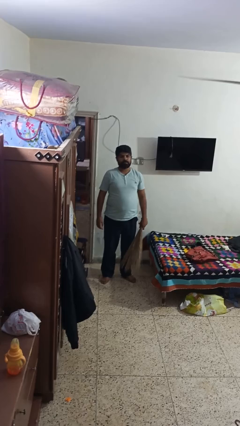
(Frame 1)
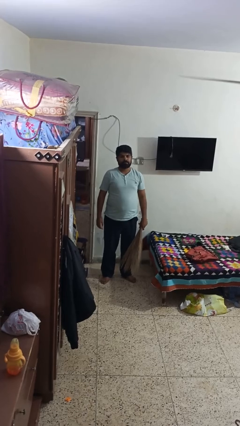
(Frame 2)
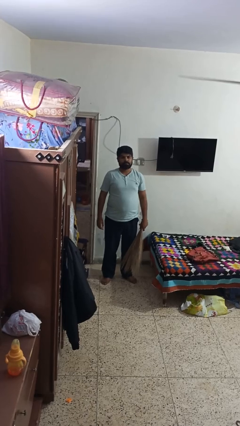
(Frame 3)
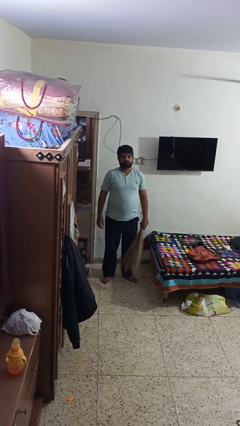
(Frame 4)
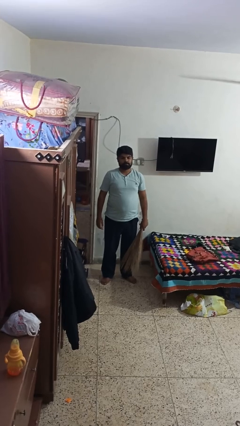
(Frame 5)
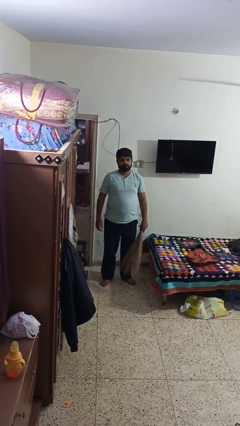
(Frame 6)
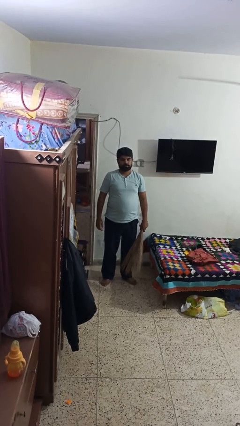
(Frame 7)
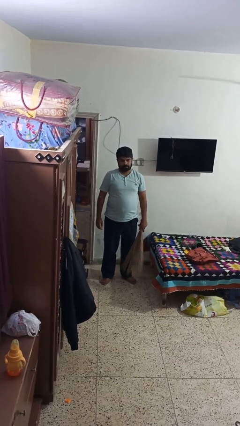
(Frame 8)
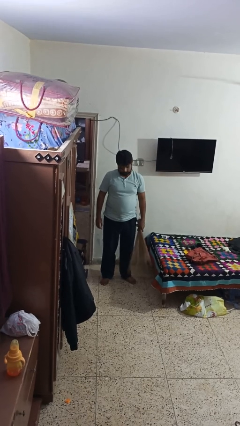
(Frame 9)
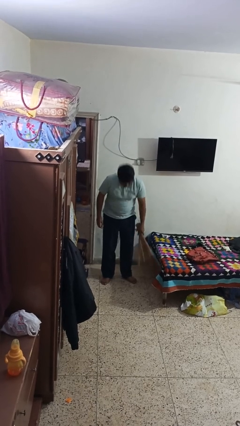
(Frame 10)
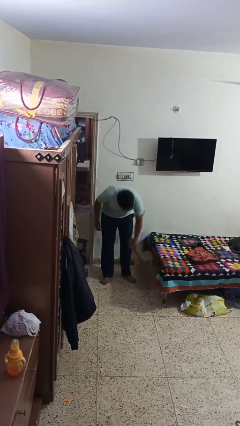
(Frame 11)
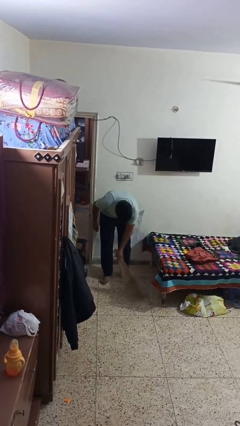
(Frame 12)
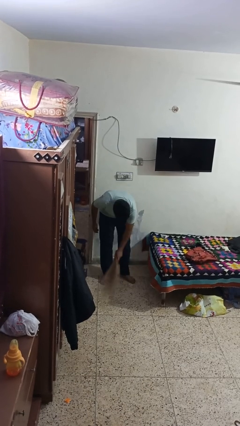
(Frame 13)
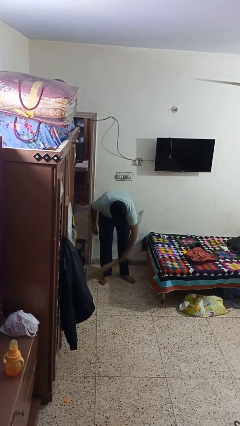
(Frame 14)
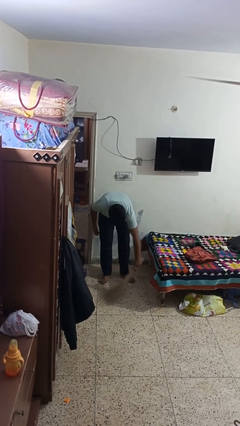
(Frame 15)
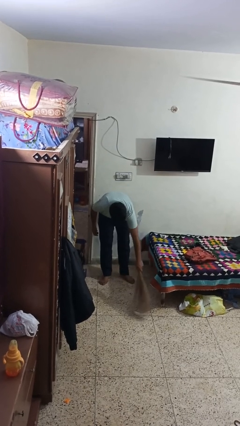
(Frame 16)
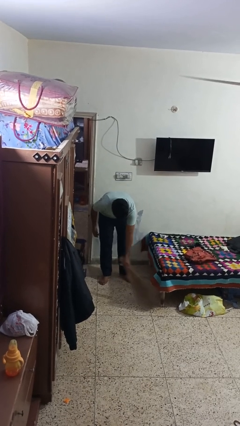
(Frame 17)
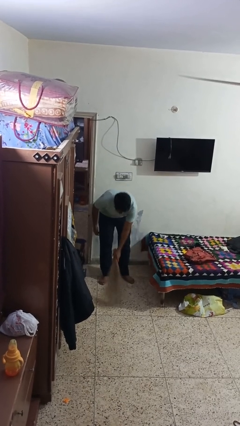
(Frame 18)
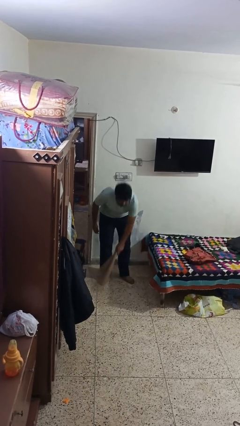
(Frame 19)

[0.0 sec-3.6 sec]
person sweeps floor

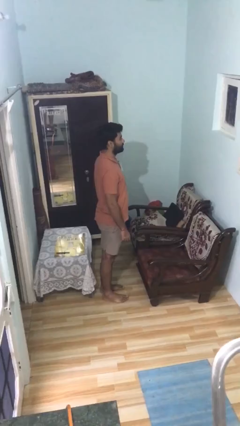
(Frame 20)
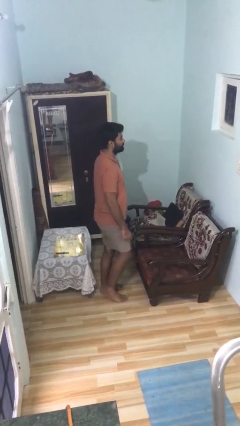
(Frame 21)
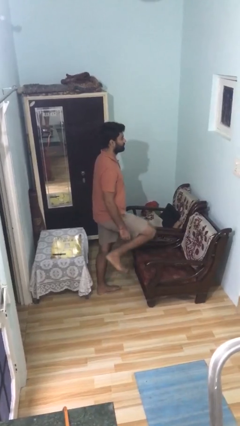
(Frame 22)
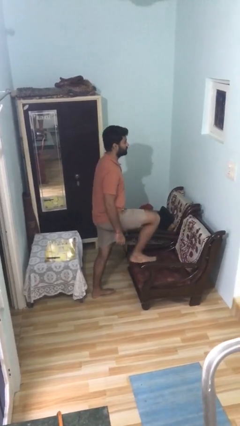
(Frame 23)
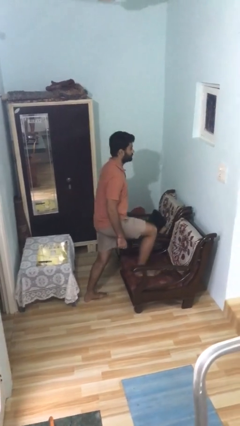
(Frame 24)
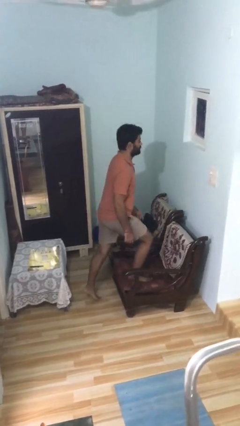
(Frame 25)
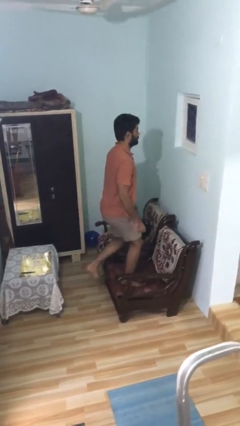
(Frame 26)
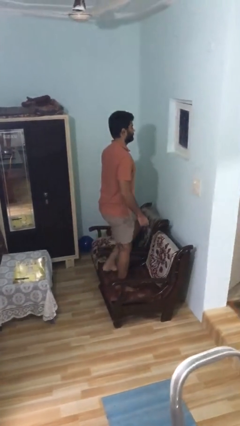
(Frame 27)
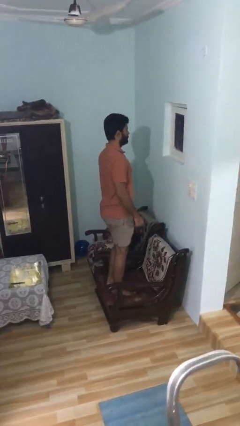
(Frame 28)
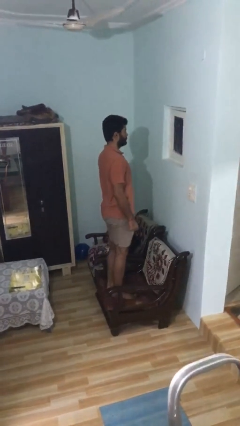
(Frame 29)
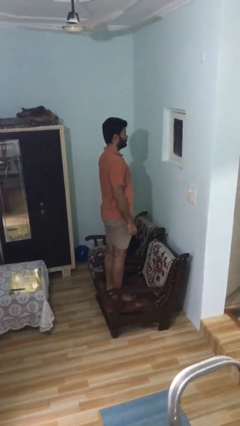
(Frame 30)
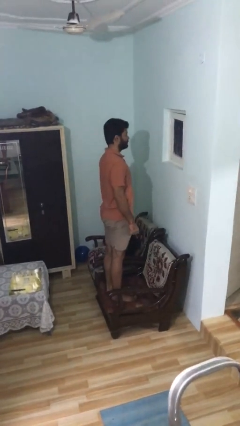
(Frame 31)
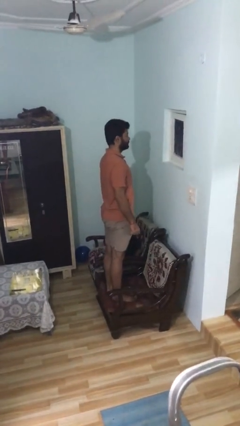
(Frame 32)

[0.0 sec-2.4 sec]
person climbs on couch

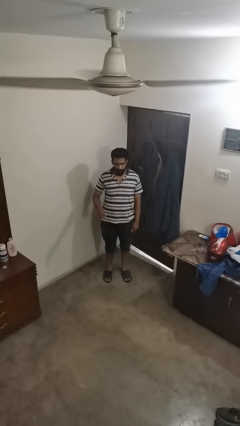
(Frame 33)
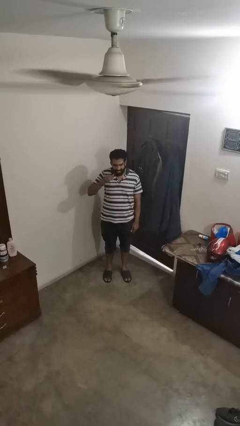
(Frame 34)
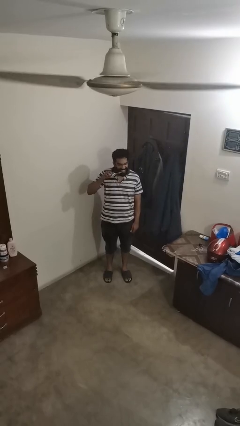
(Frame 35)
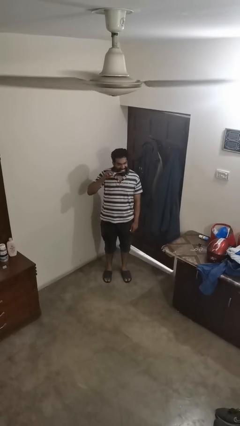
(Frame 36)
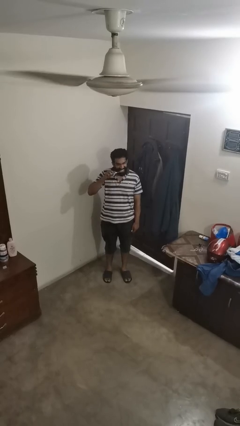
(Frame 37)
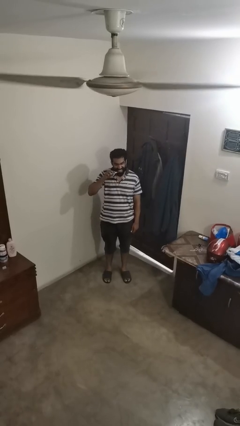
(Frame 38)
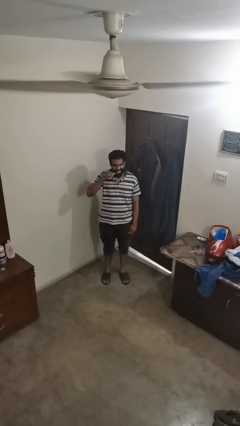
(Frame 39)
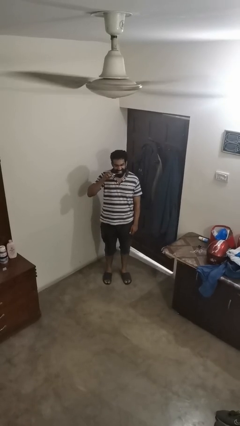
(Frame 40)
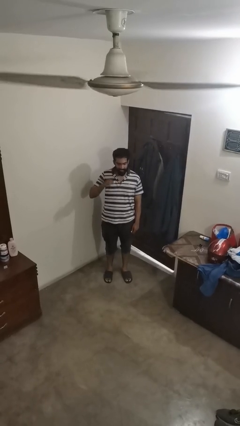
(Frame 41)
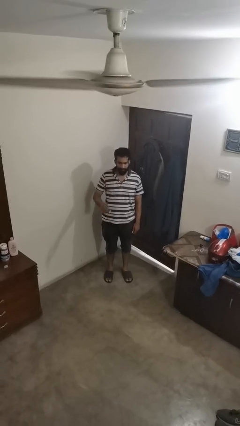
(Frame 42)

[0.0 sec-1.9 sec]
person brushes teeth

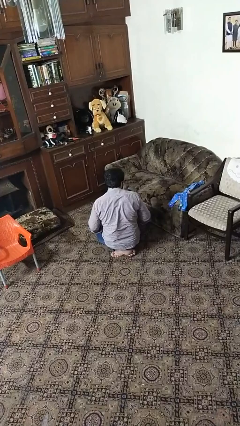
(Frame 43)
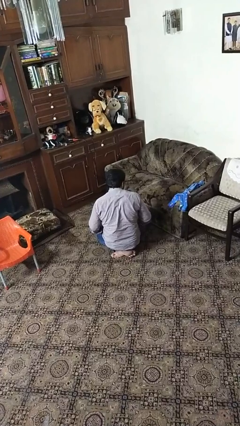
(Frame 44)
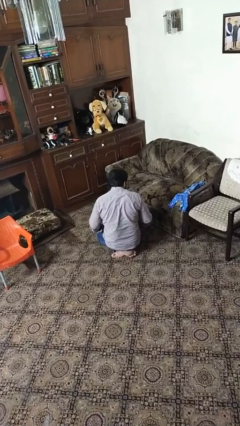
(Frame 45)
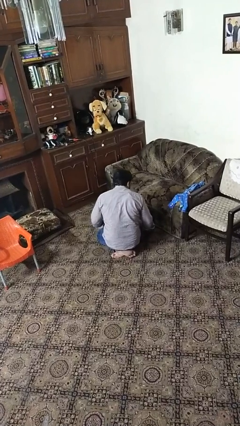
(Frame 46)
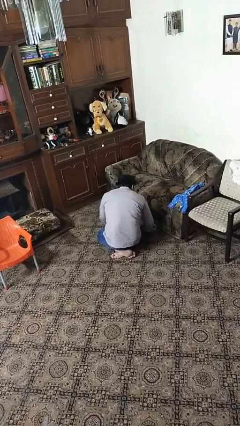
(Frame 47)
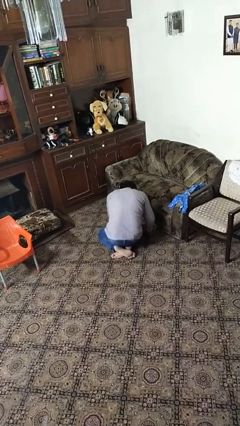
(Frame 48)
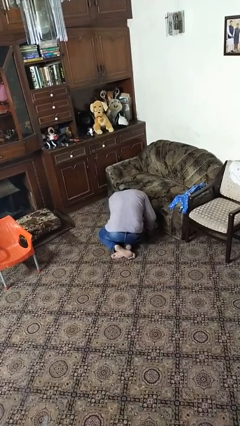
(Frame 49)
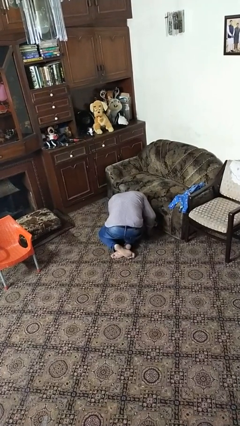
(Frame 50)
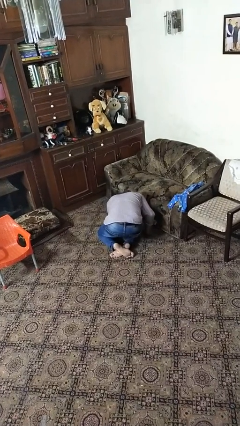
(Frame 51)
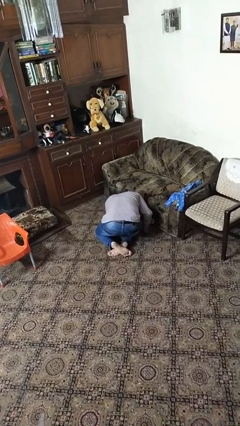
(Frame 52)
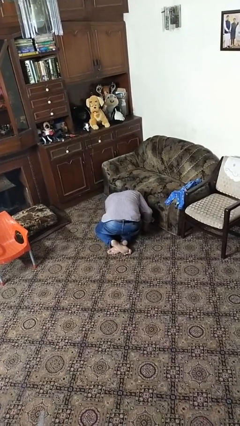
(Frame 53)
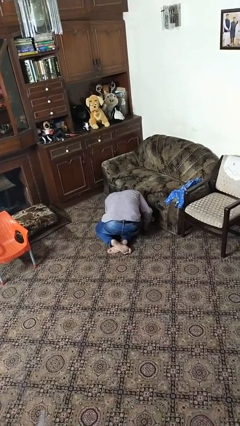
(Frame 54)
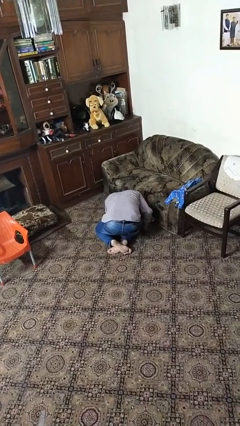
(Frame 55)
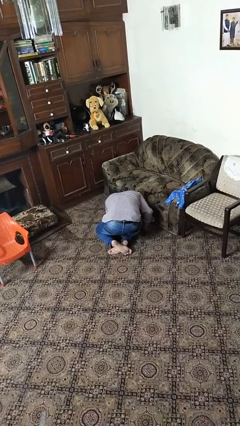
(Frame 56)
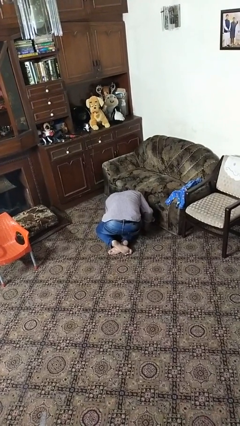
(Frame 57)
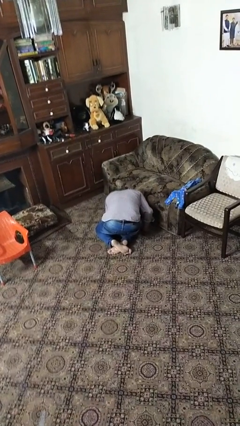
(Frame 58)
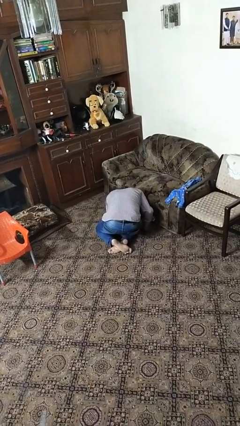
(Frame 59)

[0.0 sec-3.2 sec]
person searches under couch

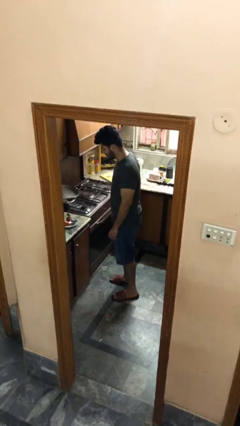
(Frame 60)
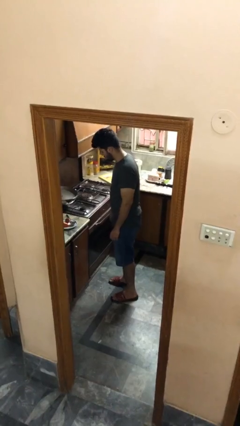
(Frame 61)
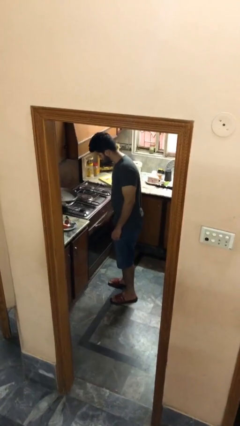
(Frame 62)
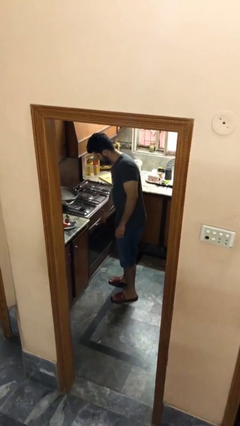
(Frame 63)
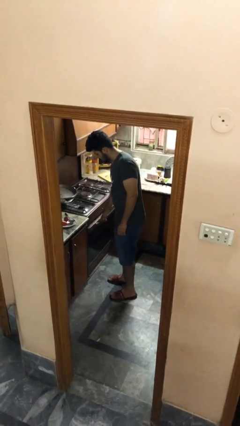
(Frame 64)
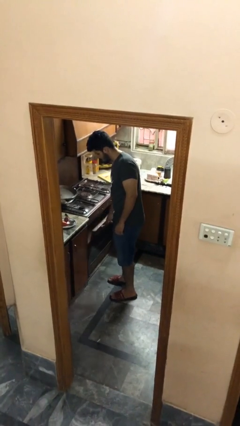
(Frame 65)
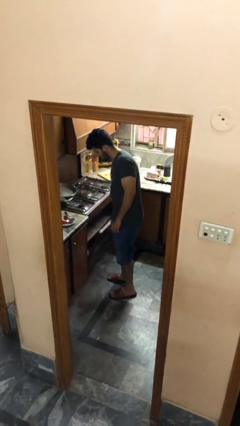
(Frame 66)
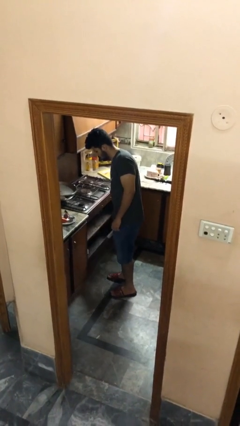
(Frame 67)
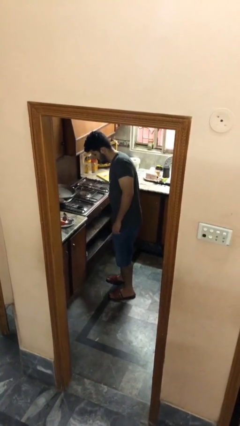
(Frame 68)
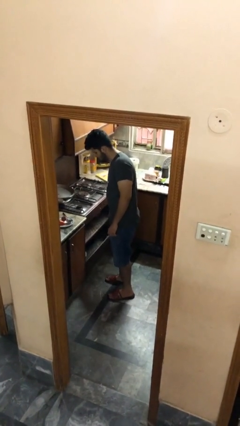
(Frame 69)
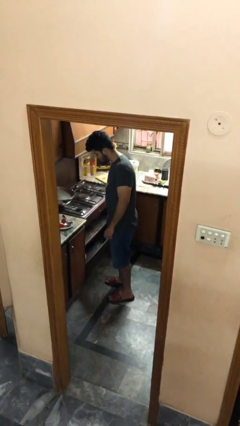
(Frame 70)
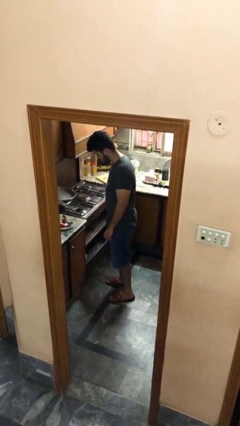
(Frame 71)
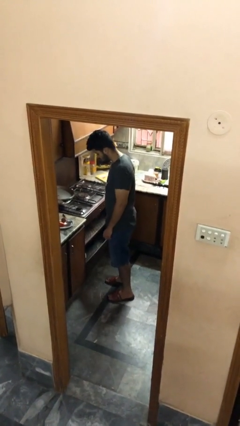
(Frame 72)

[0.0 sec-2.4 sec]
person opens oven door

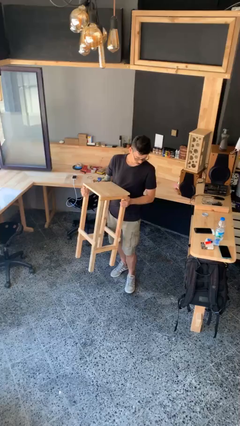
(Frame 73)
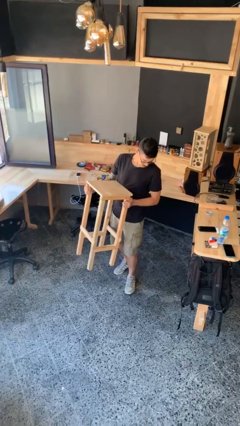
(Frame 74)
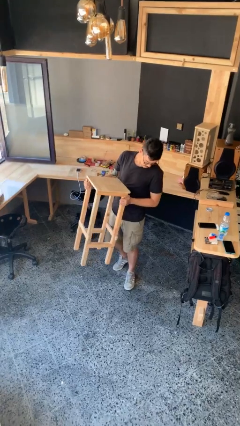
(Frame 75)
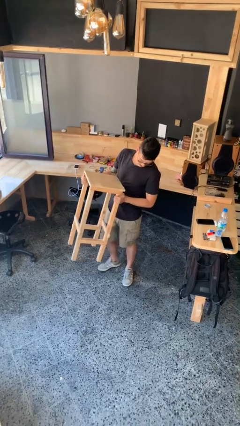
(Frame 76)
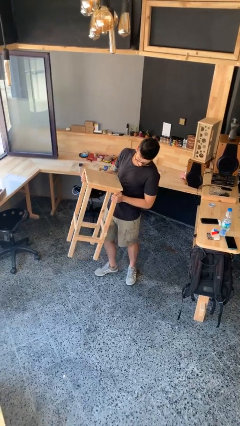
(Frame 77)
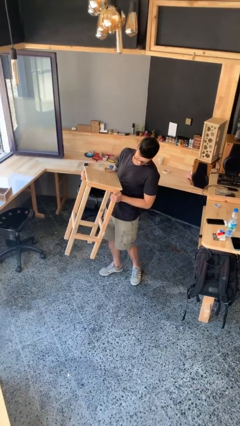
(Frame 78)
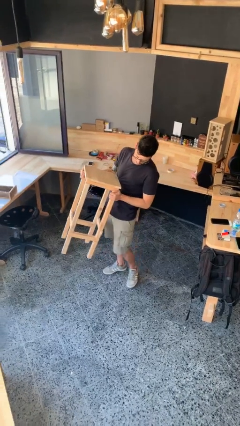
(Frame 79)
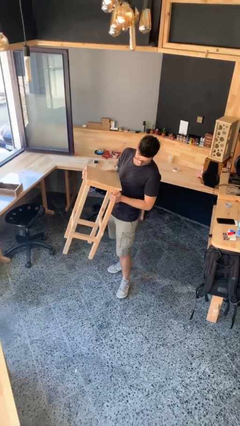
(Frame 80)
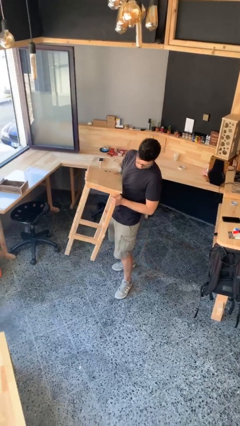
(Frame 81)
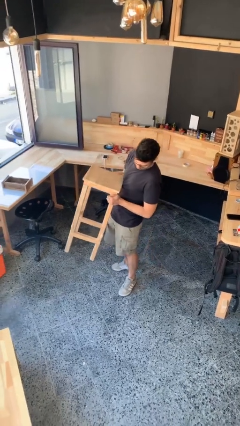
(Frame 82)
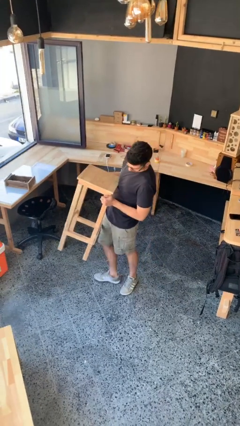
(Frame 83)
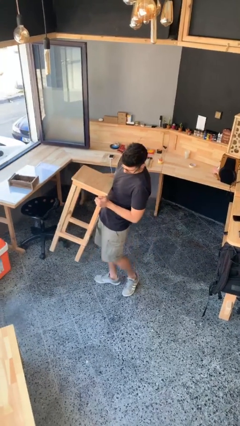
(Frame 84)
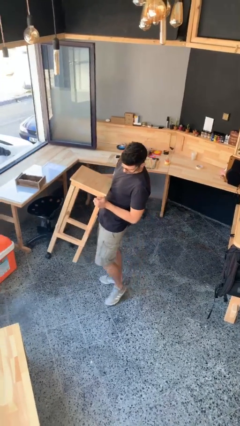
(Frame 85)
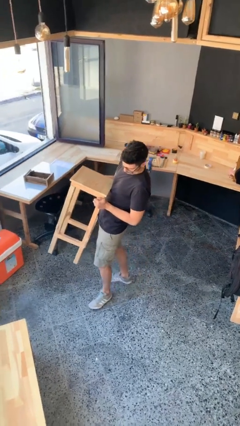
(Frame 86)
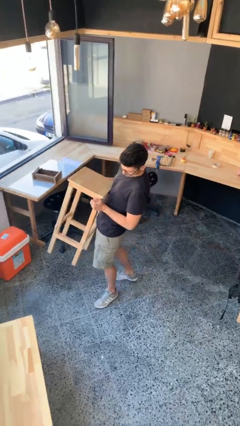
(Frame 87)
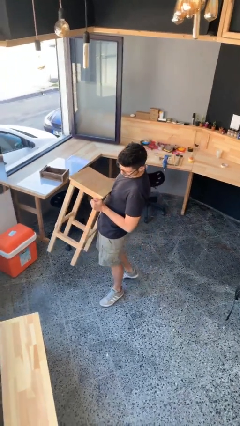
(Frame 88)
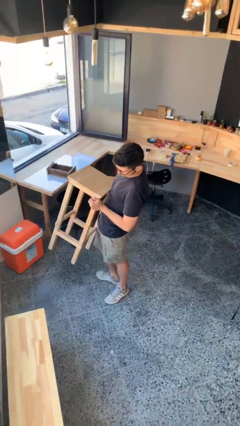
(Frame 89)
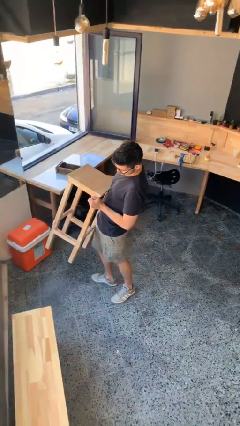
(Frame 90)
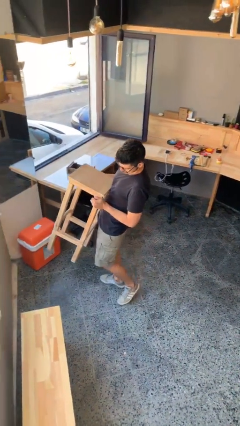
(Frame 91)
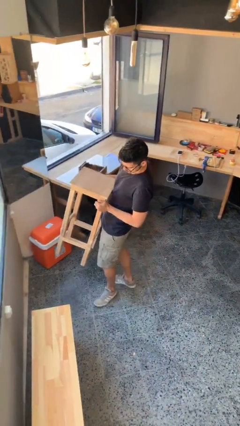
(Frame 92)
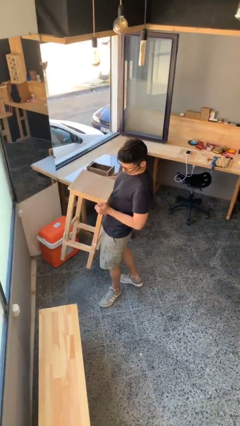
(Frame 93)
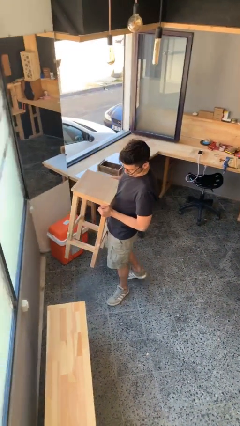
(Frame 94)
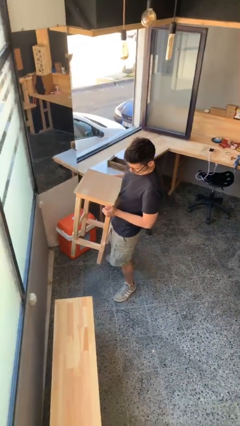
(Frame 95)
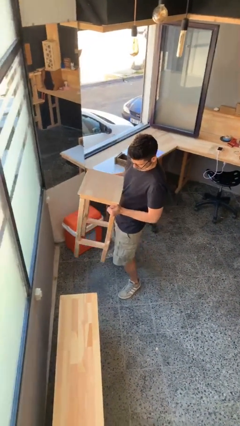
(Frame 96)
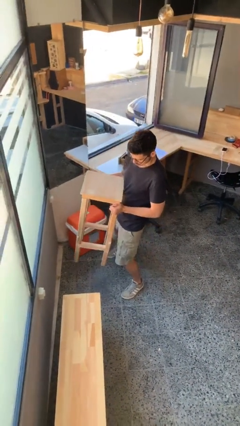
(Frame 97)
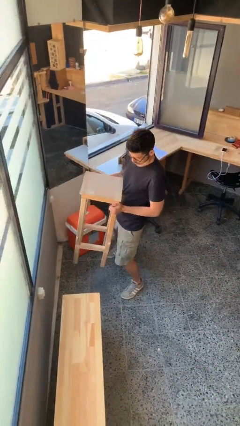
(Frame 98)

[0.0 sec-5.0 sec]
person carries heavy object
